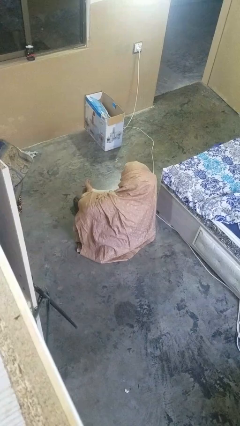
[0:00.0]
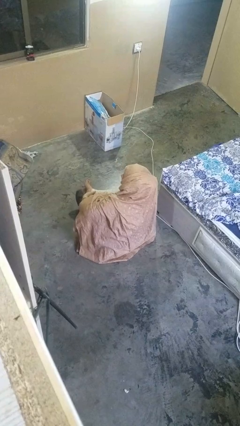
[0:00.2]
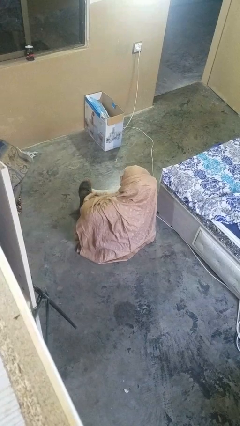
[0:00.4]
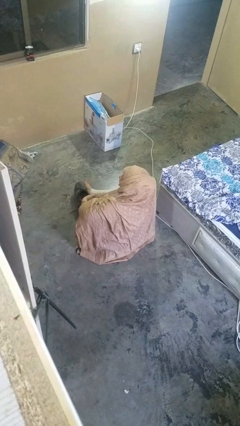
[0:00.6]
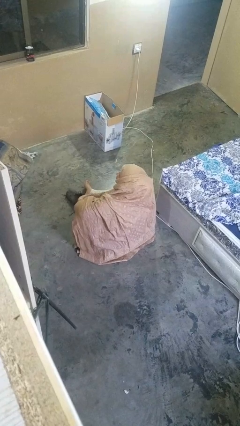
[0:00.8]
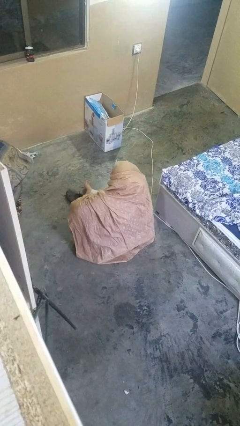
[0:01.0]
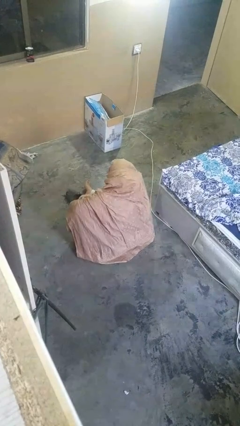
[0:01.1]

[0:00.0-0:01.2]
person takes off shoes

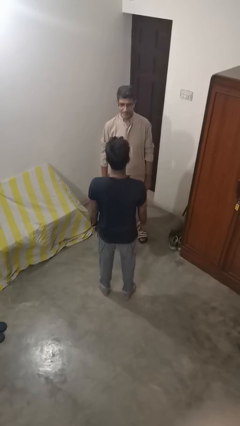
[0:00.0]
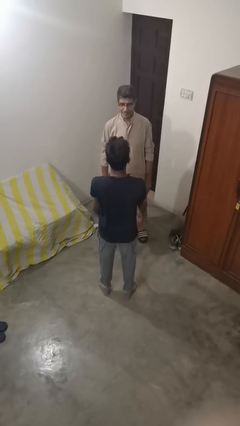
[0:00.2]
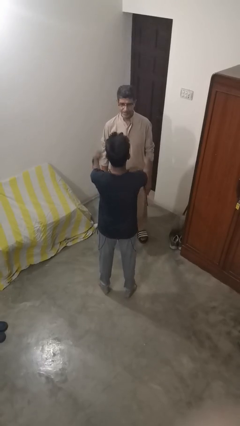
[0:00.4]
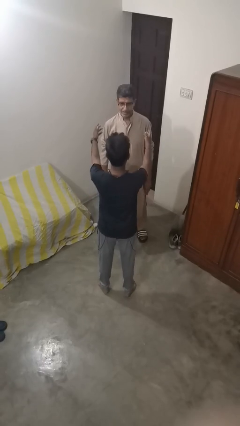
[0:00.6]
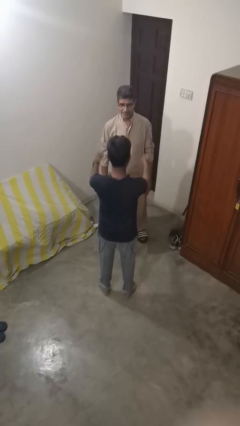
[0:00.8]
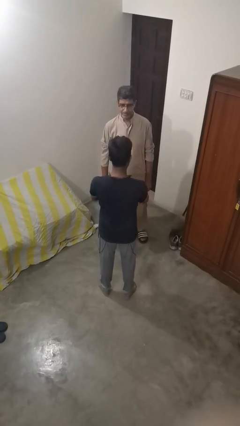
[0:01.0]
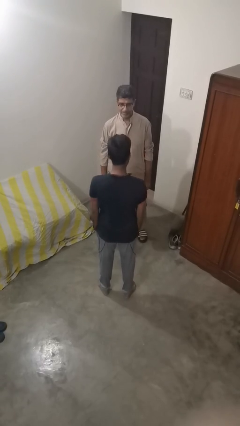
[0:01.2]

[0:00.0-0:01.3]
person laughs with person

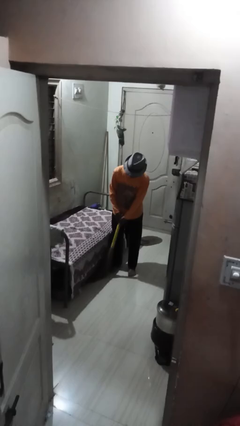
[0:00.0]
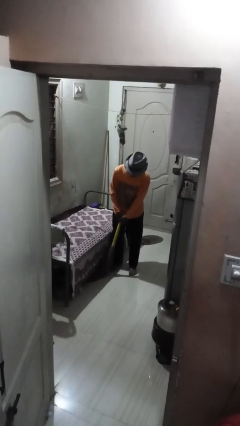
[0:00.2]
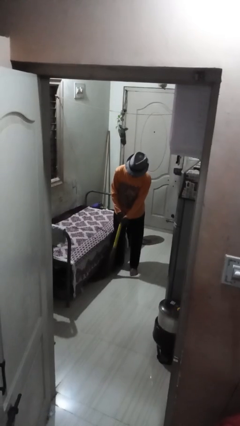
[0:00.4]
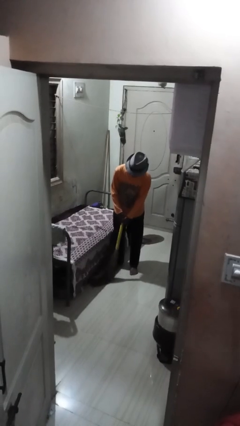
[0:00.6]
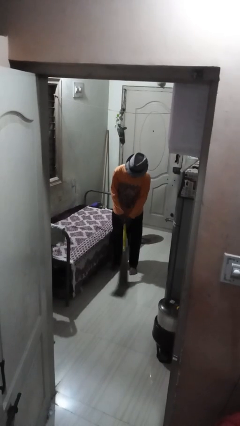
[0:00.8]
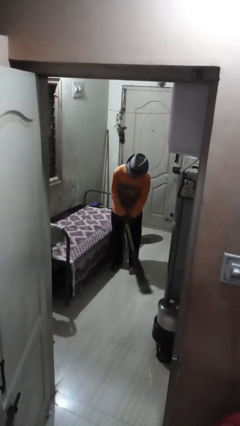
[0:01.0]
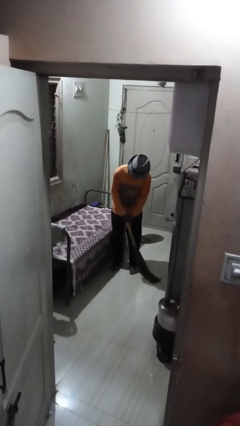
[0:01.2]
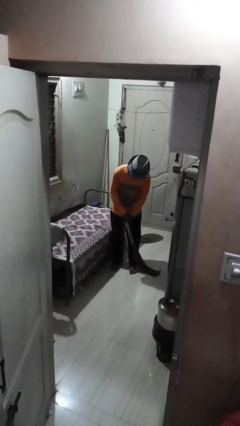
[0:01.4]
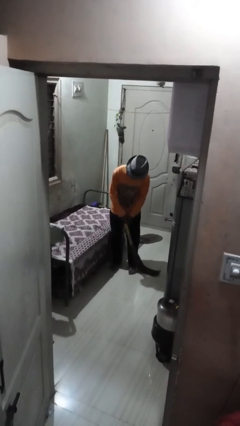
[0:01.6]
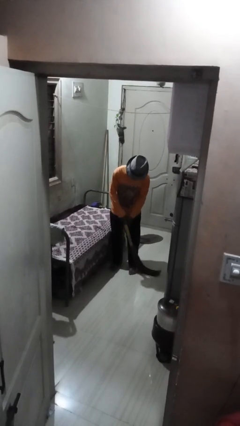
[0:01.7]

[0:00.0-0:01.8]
person sweeps floor

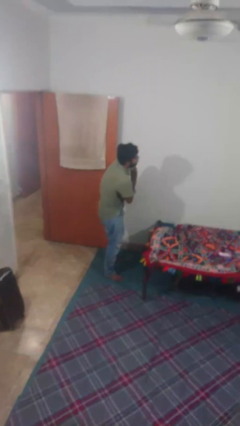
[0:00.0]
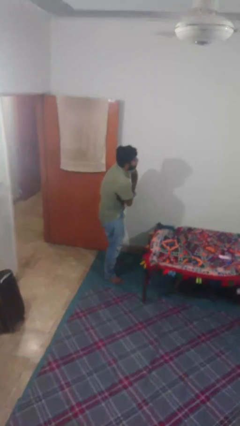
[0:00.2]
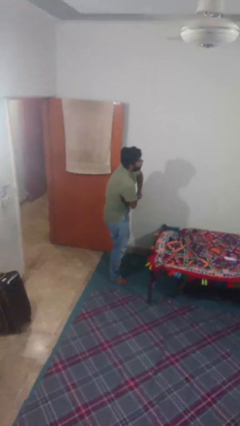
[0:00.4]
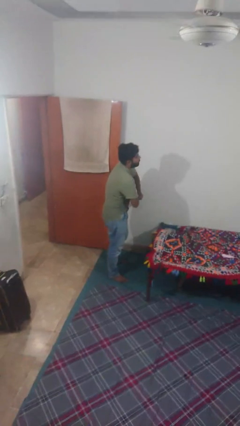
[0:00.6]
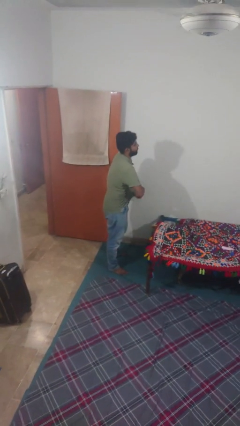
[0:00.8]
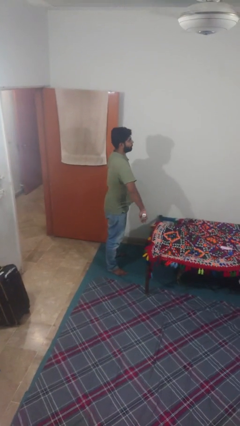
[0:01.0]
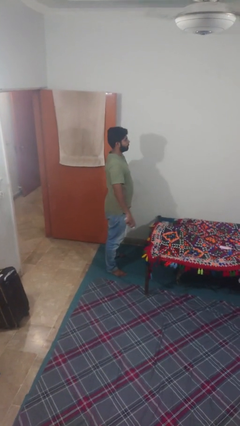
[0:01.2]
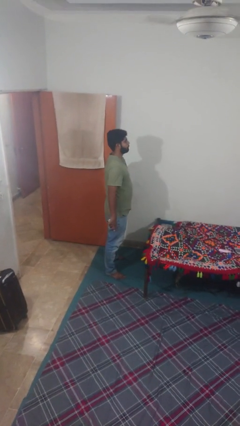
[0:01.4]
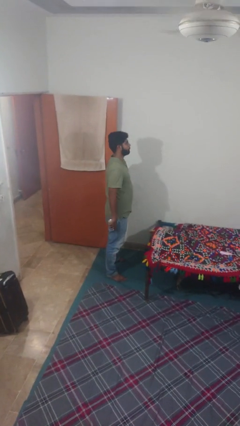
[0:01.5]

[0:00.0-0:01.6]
person applies deodorant

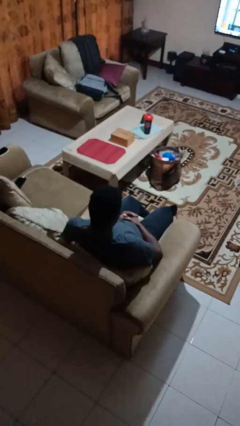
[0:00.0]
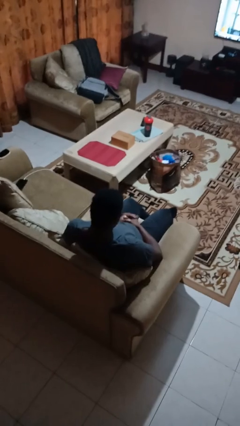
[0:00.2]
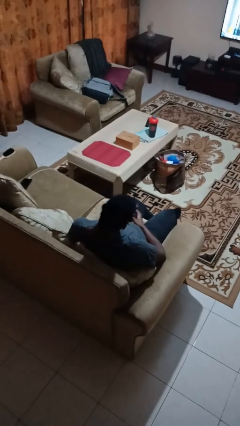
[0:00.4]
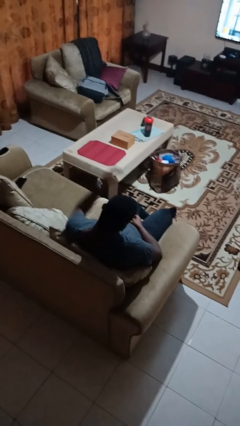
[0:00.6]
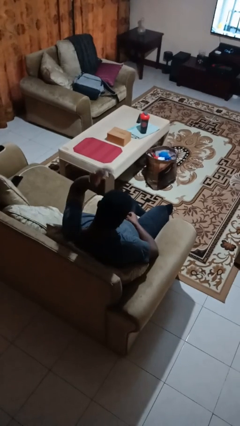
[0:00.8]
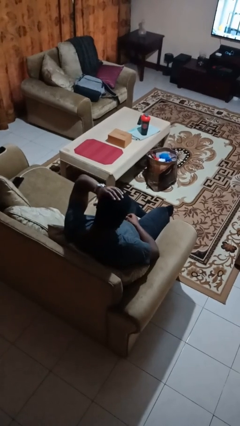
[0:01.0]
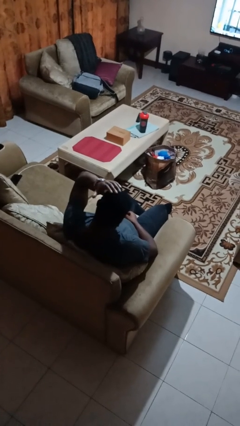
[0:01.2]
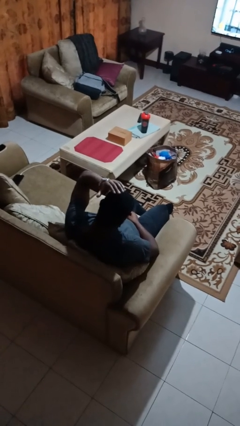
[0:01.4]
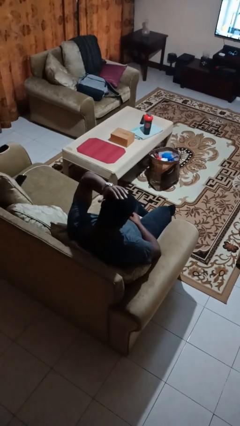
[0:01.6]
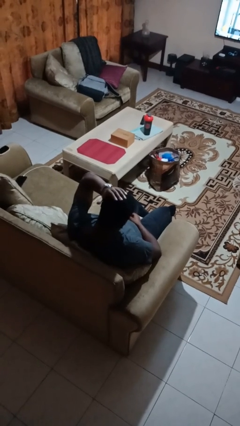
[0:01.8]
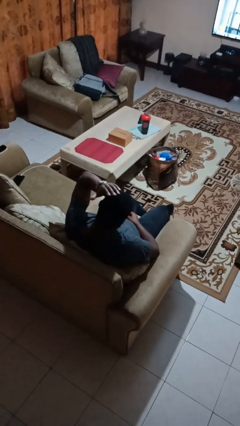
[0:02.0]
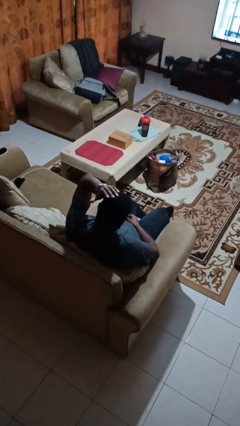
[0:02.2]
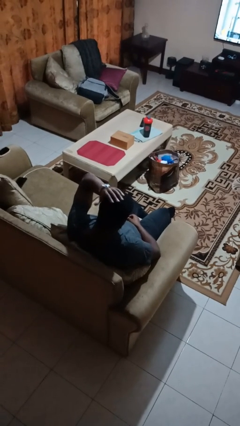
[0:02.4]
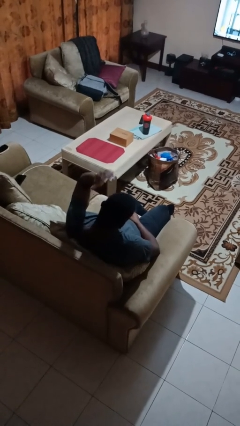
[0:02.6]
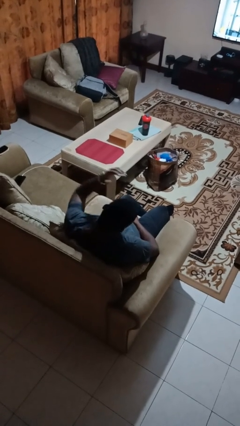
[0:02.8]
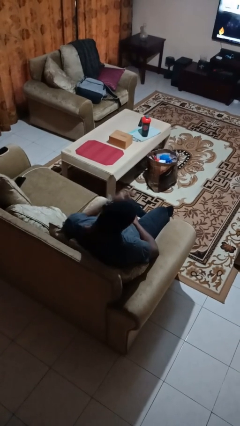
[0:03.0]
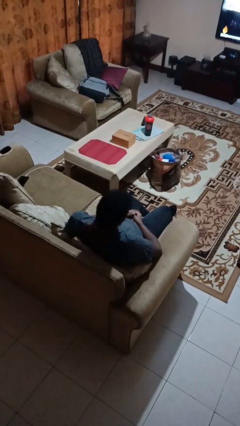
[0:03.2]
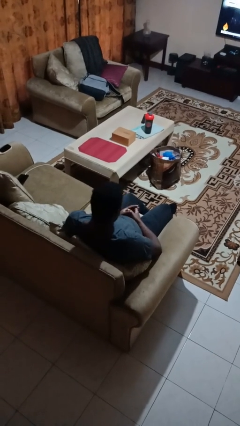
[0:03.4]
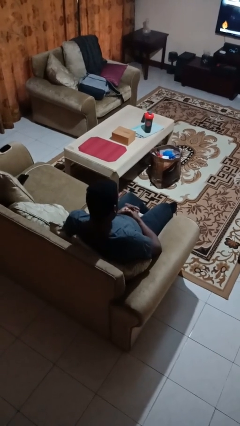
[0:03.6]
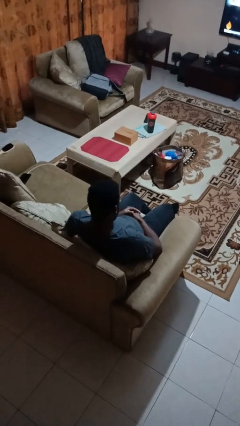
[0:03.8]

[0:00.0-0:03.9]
person pats head

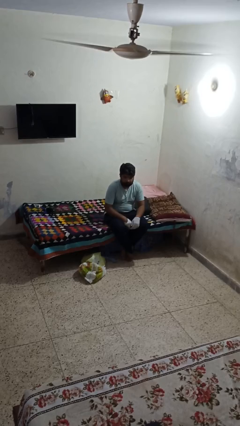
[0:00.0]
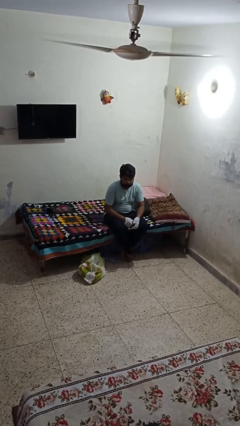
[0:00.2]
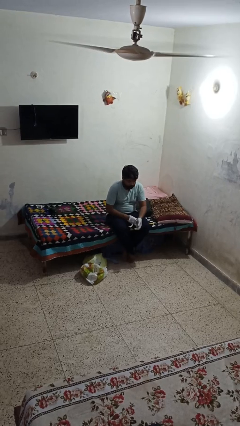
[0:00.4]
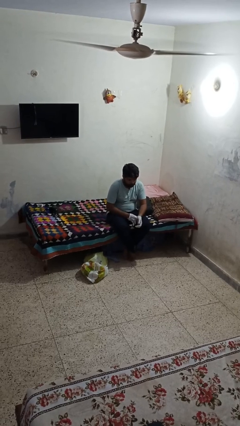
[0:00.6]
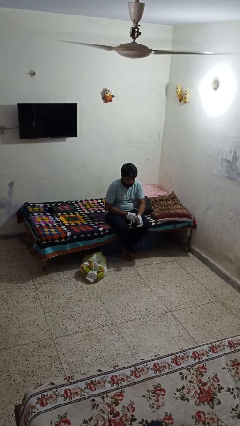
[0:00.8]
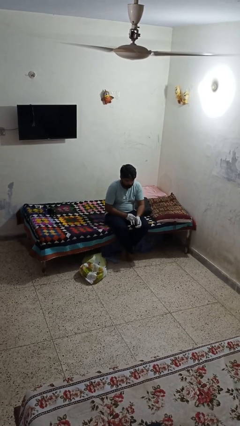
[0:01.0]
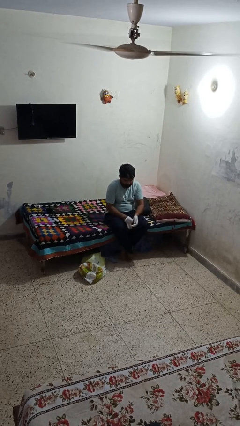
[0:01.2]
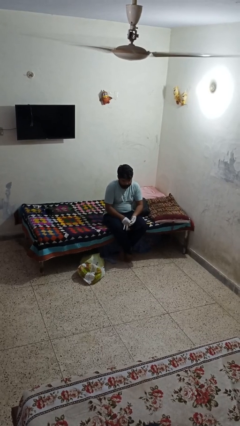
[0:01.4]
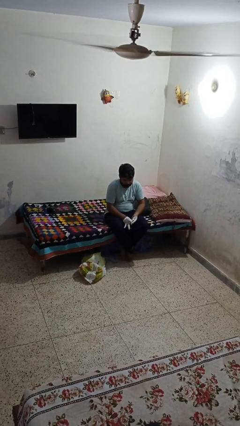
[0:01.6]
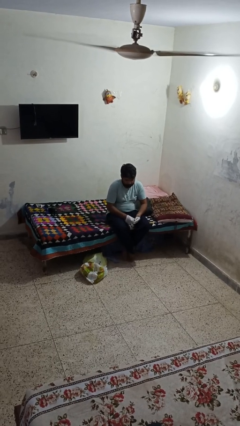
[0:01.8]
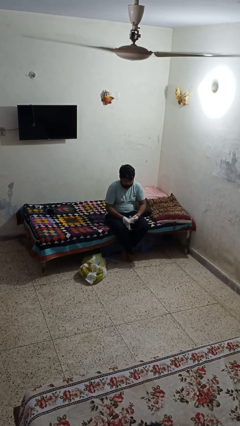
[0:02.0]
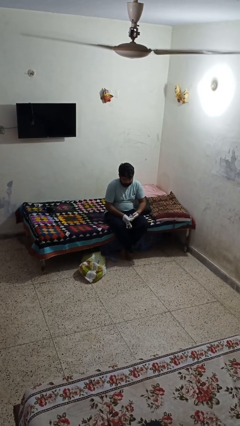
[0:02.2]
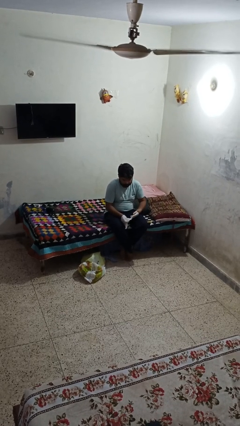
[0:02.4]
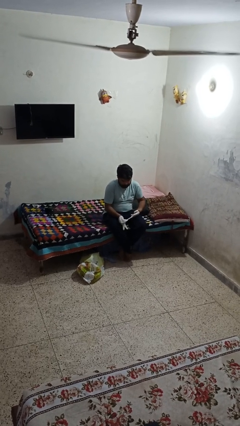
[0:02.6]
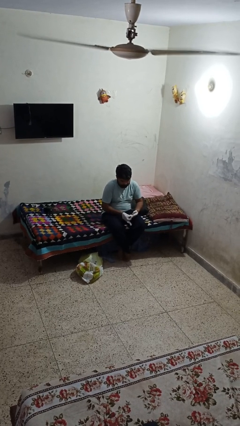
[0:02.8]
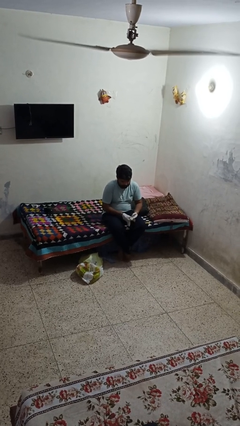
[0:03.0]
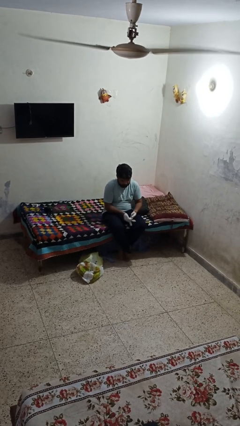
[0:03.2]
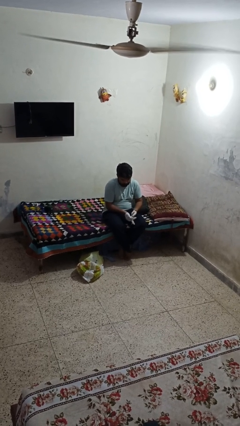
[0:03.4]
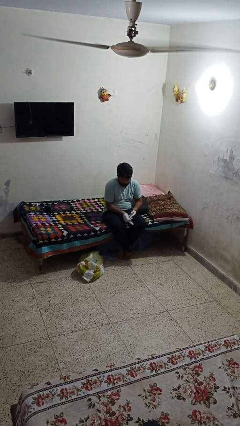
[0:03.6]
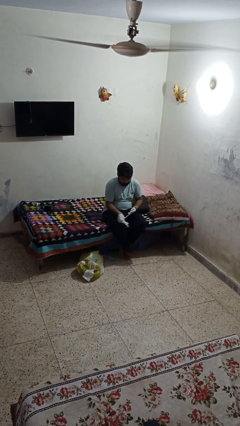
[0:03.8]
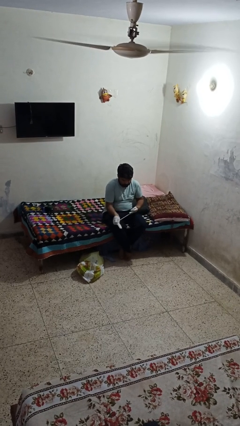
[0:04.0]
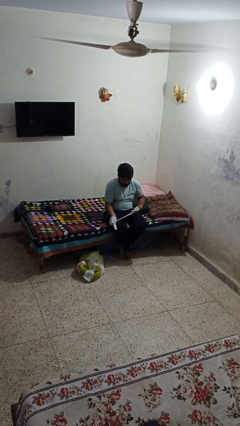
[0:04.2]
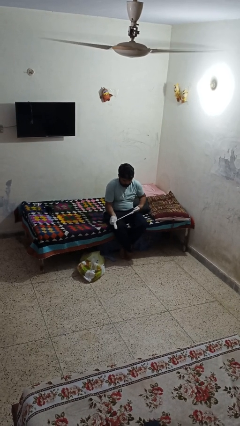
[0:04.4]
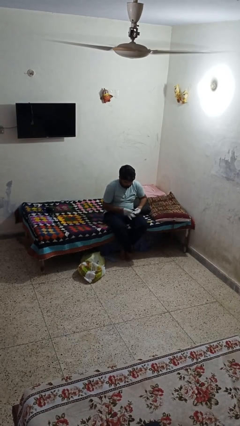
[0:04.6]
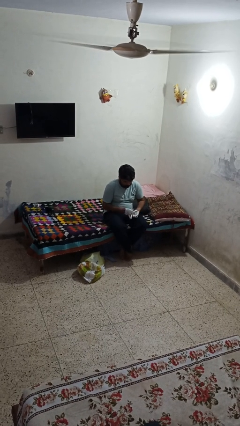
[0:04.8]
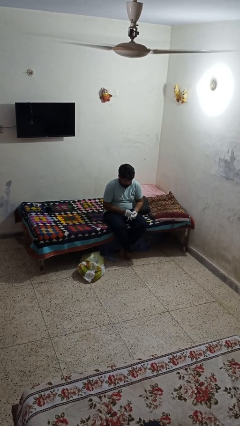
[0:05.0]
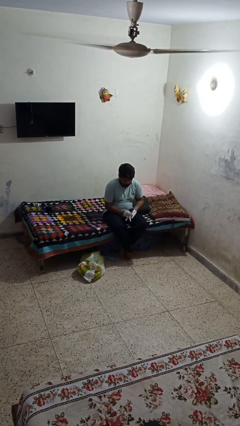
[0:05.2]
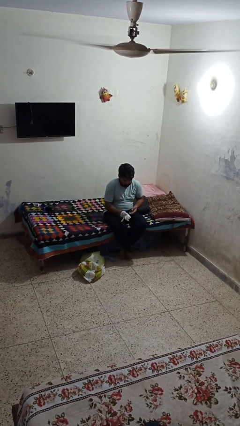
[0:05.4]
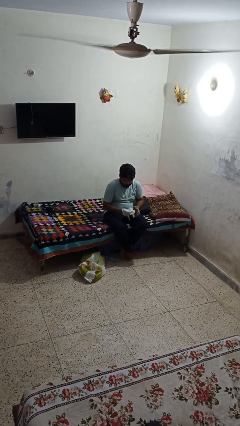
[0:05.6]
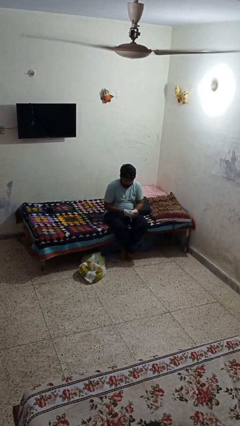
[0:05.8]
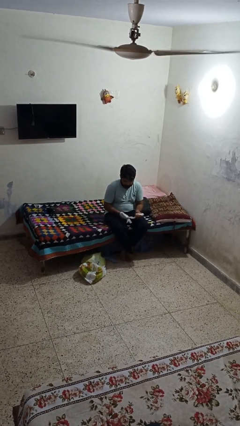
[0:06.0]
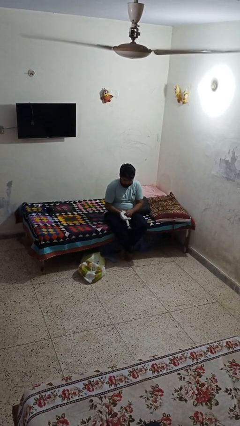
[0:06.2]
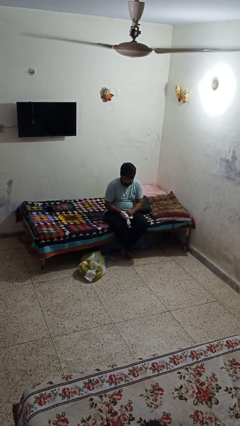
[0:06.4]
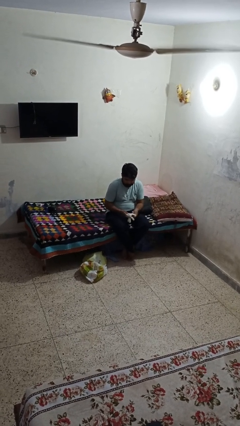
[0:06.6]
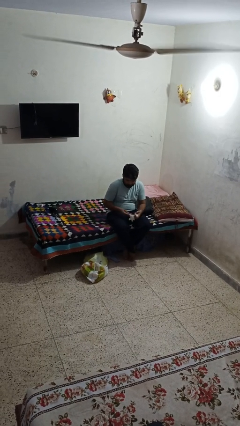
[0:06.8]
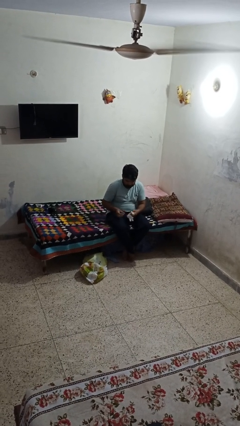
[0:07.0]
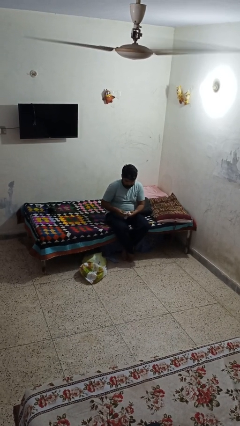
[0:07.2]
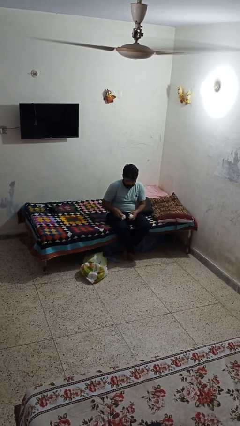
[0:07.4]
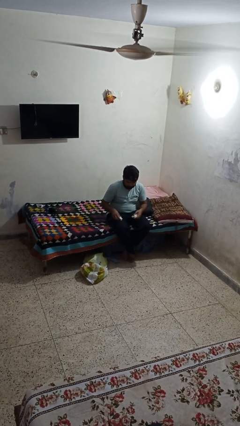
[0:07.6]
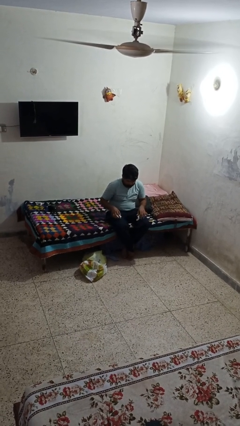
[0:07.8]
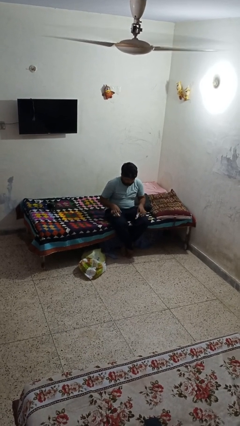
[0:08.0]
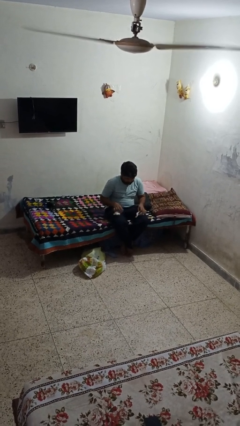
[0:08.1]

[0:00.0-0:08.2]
person takes off gloves
